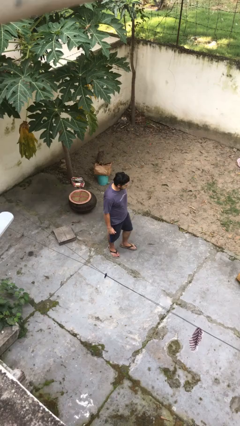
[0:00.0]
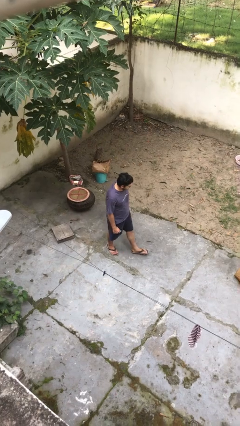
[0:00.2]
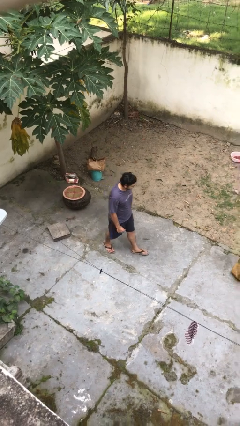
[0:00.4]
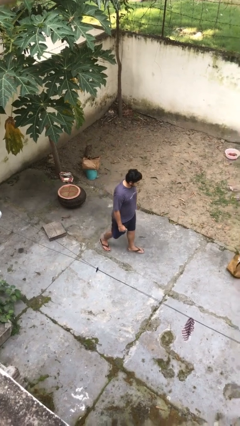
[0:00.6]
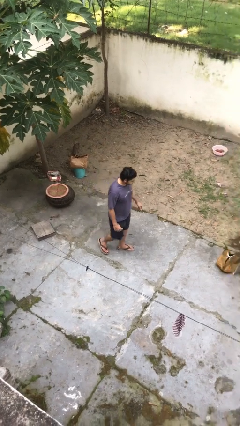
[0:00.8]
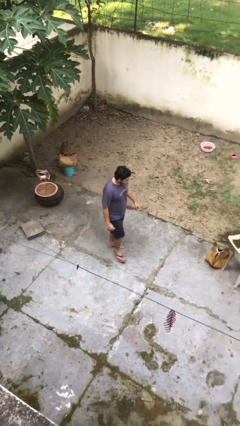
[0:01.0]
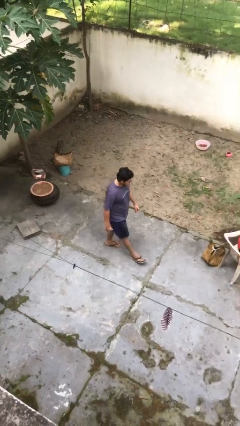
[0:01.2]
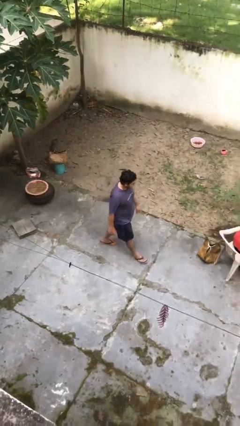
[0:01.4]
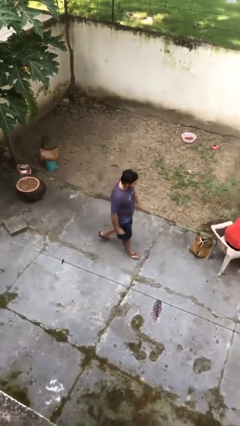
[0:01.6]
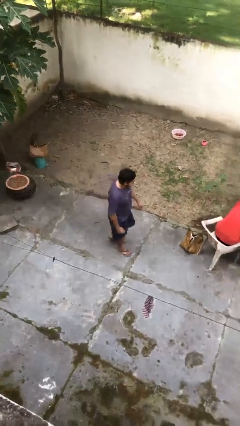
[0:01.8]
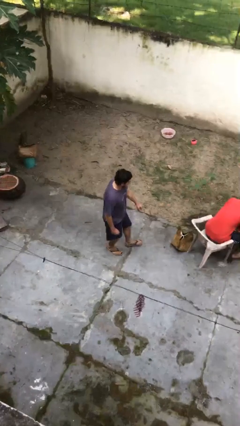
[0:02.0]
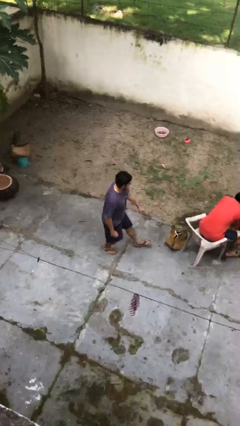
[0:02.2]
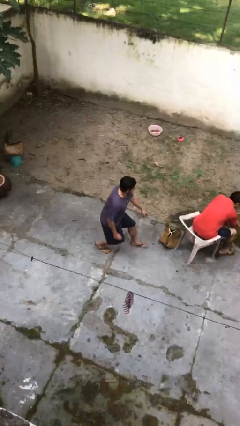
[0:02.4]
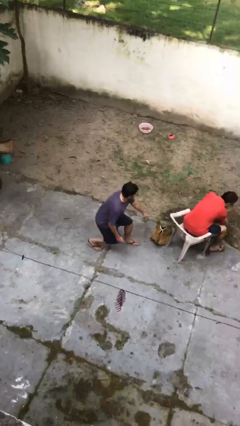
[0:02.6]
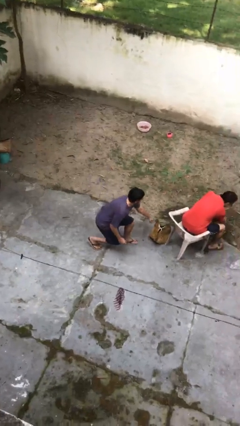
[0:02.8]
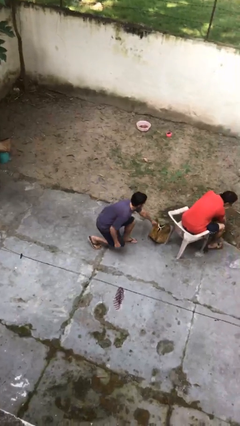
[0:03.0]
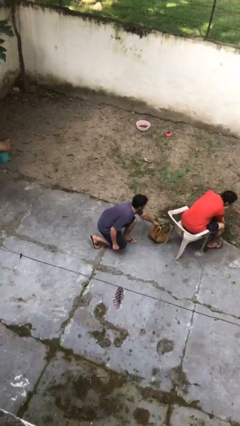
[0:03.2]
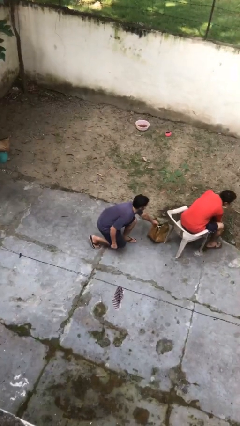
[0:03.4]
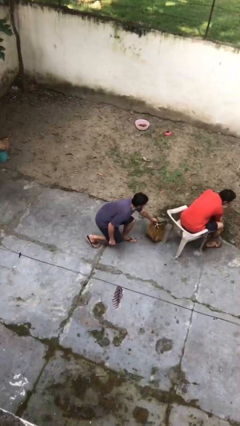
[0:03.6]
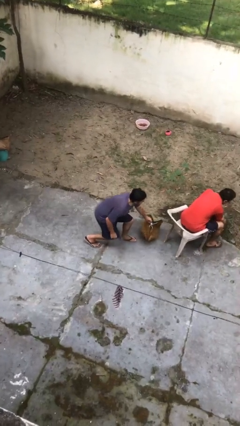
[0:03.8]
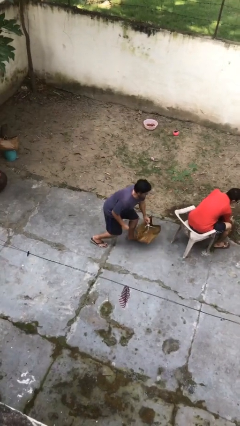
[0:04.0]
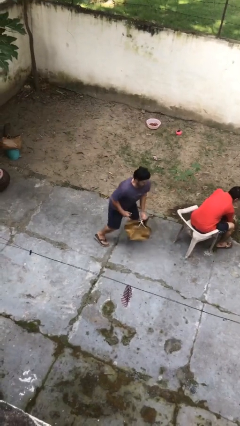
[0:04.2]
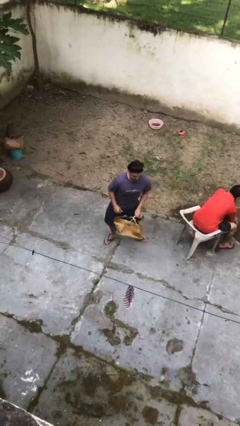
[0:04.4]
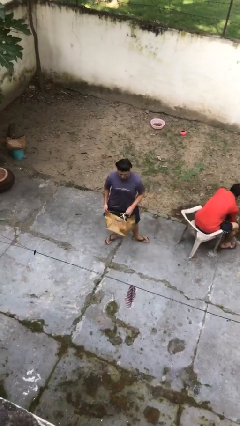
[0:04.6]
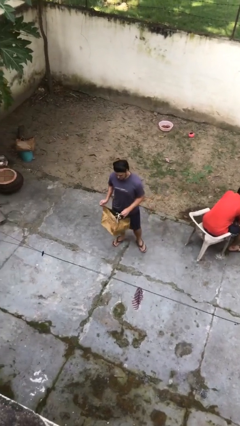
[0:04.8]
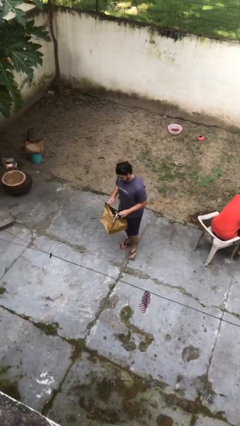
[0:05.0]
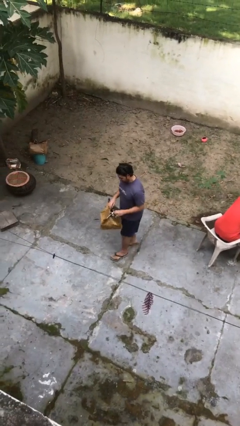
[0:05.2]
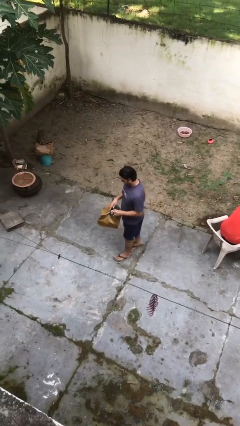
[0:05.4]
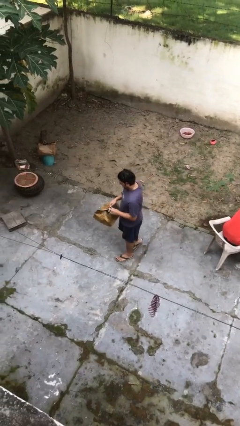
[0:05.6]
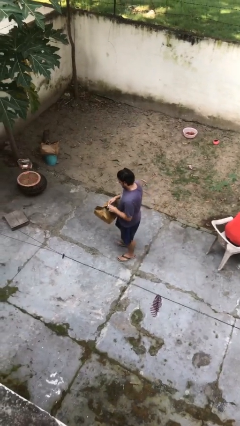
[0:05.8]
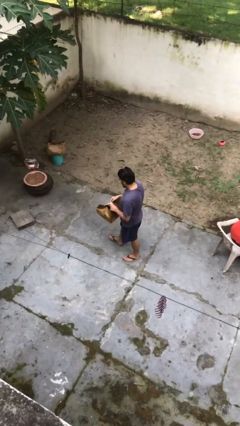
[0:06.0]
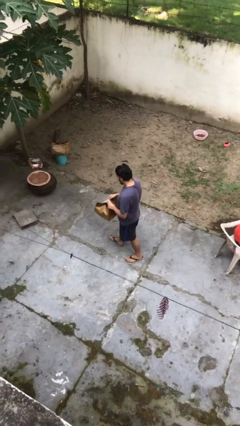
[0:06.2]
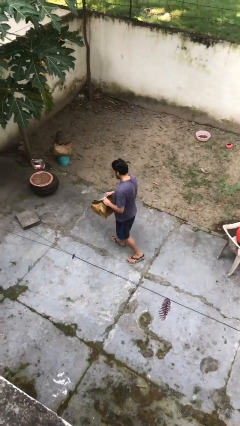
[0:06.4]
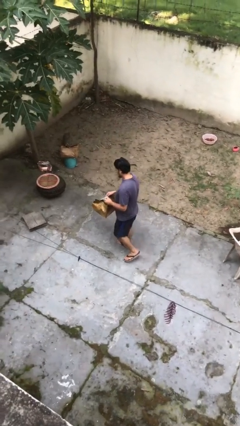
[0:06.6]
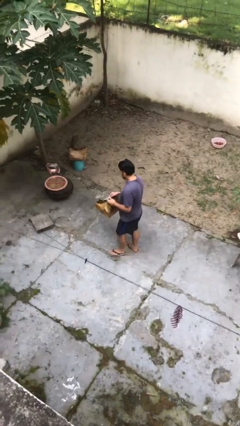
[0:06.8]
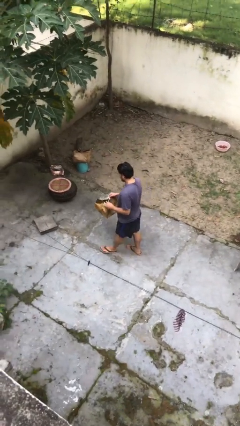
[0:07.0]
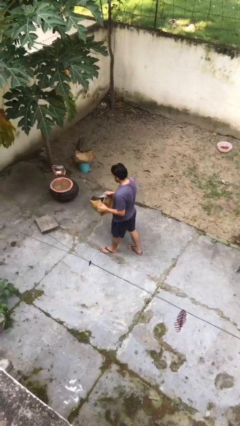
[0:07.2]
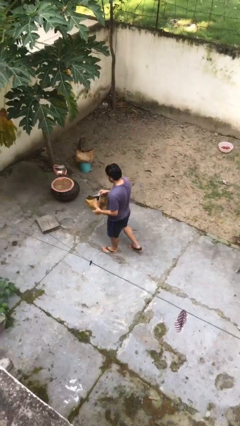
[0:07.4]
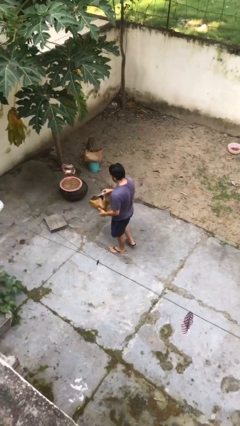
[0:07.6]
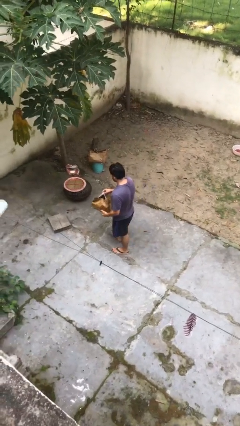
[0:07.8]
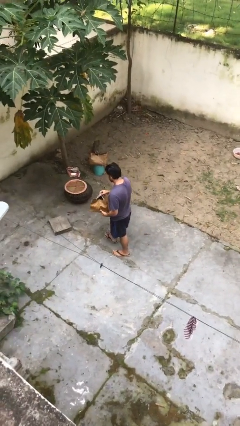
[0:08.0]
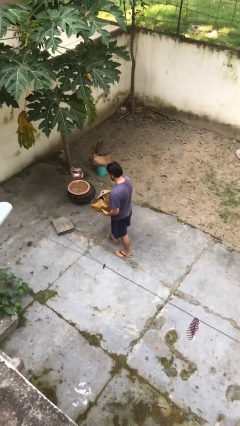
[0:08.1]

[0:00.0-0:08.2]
person steals object from person

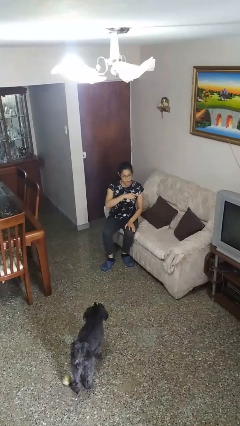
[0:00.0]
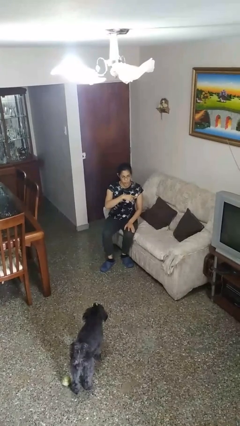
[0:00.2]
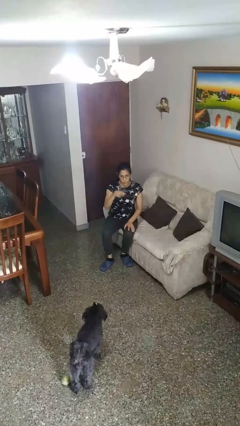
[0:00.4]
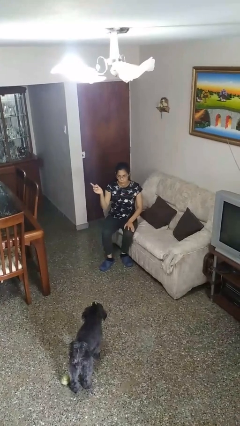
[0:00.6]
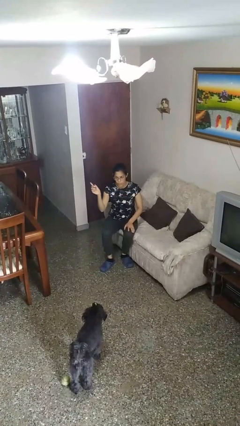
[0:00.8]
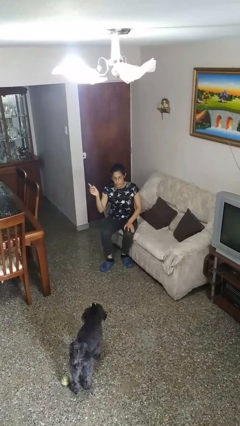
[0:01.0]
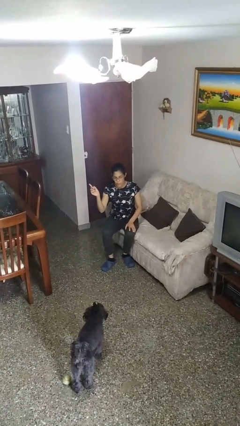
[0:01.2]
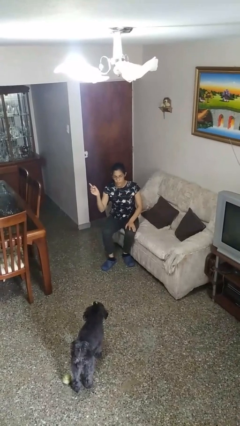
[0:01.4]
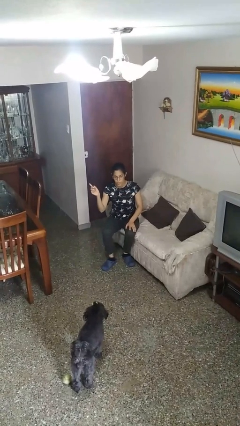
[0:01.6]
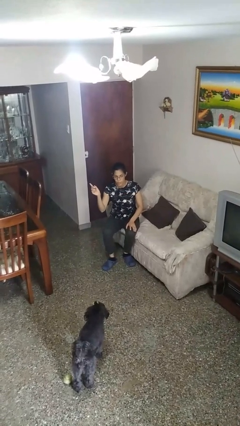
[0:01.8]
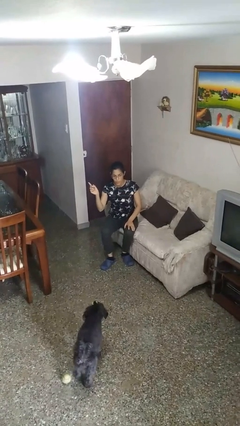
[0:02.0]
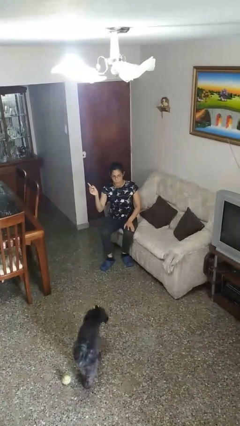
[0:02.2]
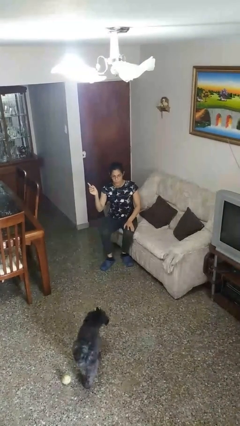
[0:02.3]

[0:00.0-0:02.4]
person gestures swipe right

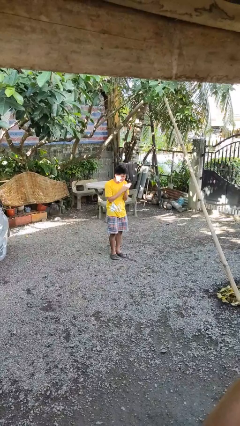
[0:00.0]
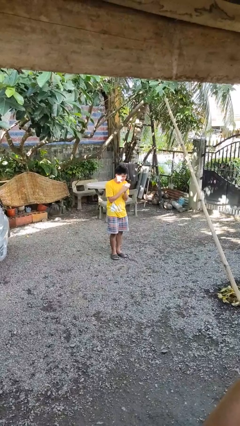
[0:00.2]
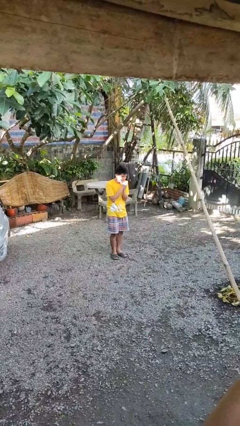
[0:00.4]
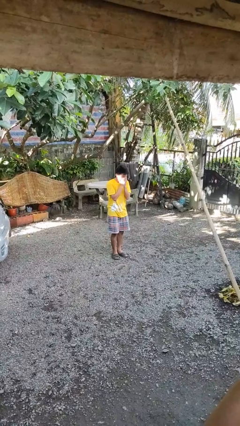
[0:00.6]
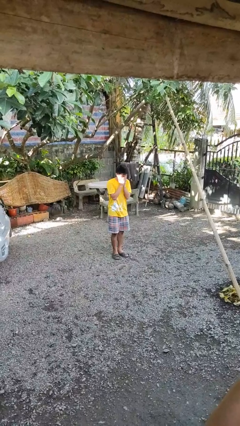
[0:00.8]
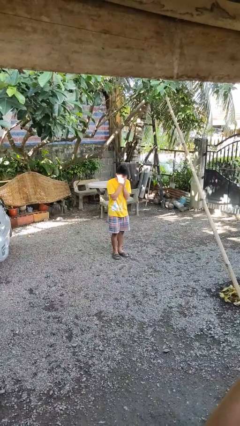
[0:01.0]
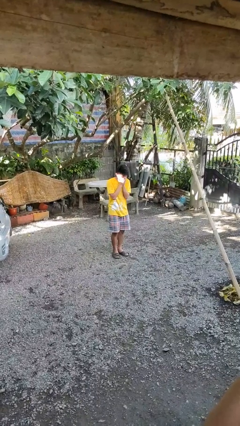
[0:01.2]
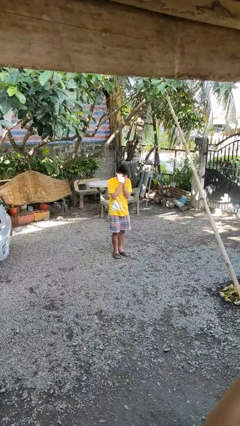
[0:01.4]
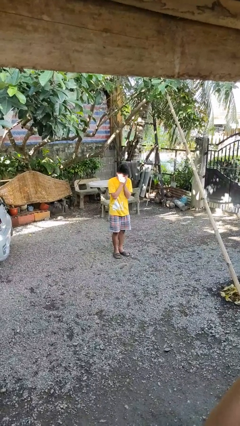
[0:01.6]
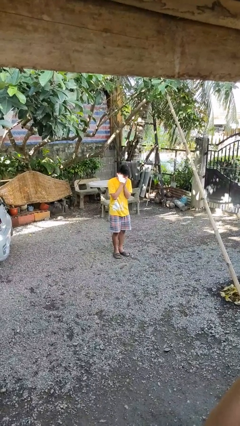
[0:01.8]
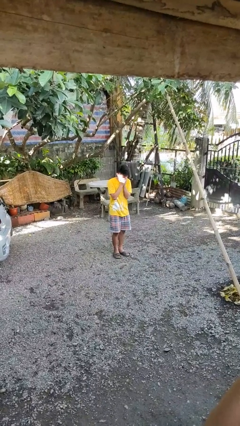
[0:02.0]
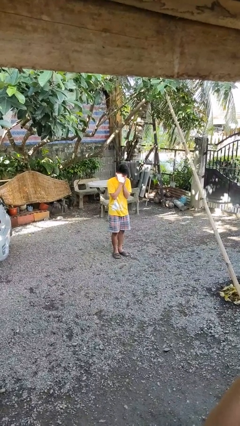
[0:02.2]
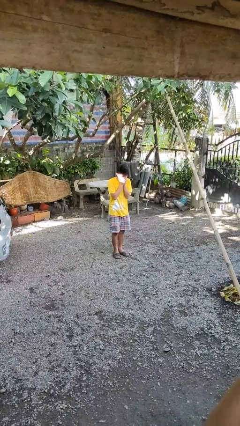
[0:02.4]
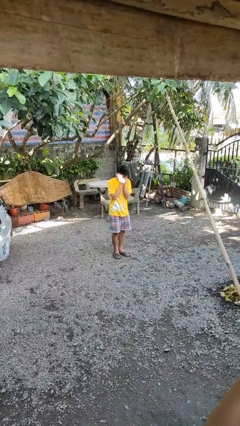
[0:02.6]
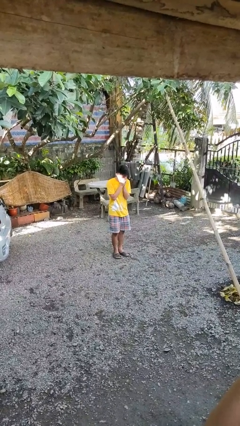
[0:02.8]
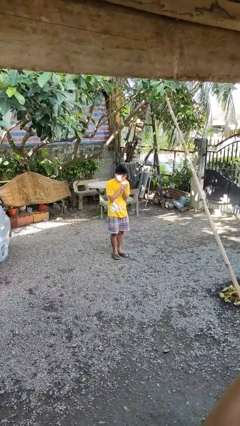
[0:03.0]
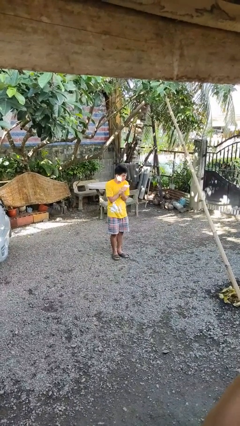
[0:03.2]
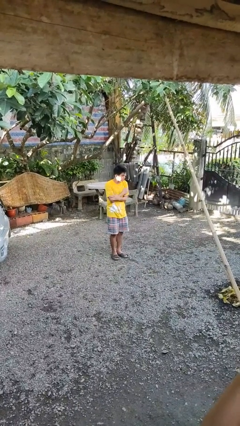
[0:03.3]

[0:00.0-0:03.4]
person blows into hands

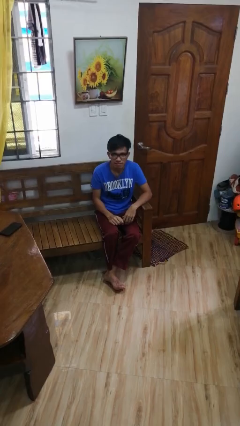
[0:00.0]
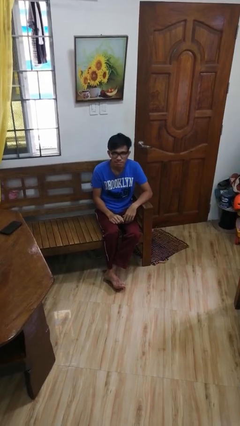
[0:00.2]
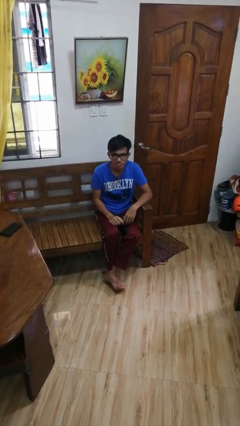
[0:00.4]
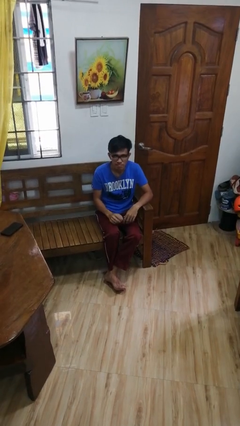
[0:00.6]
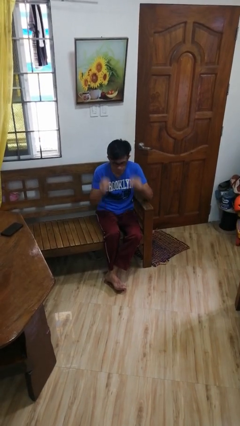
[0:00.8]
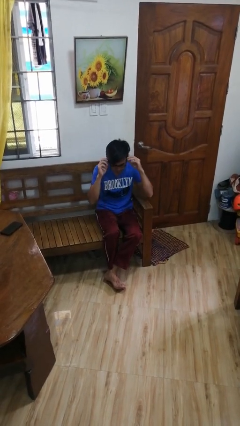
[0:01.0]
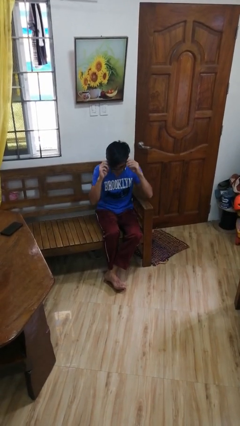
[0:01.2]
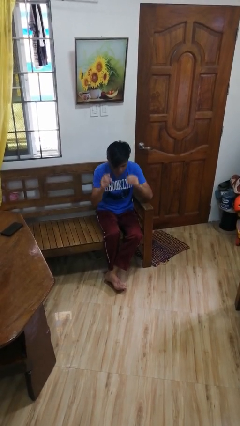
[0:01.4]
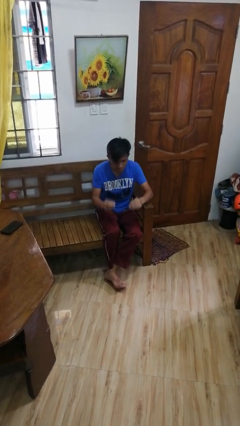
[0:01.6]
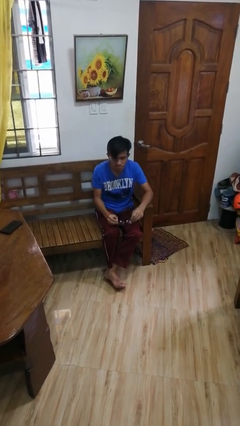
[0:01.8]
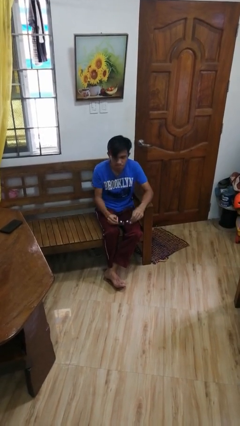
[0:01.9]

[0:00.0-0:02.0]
person takes off glasses

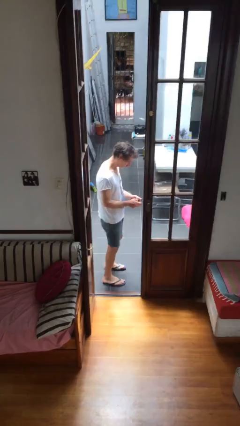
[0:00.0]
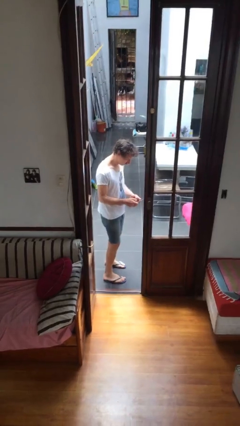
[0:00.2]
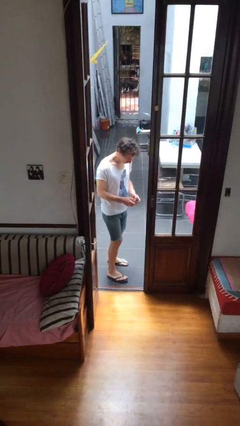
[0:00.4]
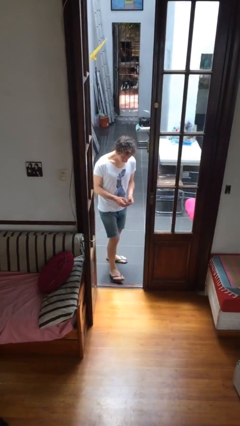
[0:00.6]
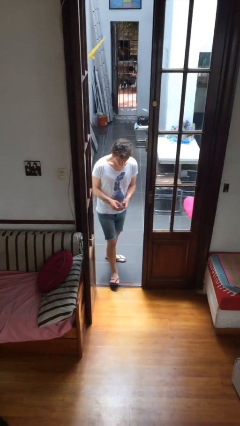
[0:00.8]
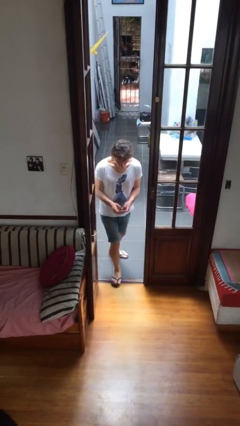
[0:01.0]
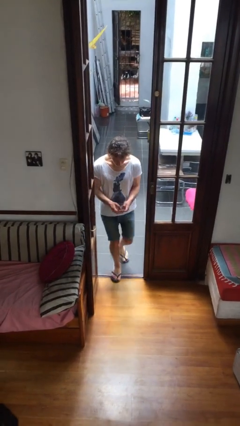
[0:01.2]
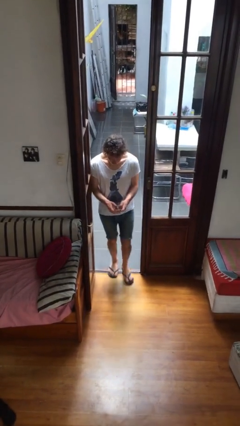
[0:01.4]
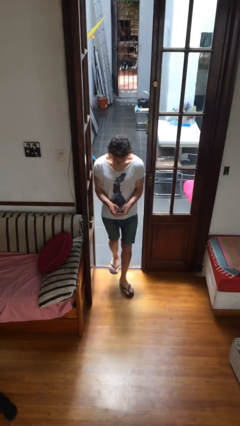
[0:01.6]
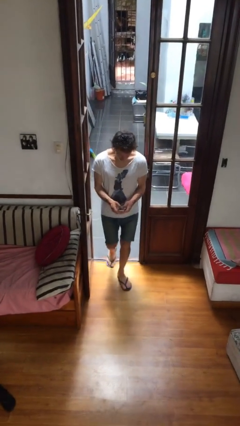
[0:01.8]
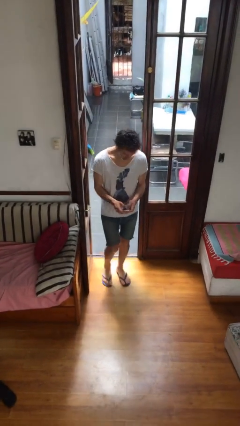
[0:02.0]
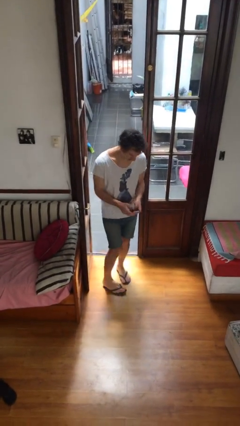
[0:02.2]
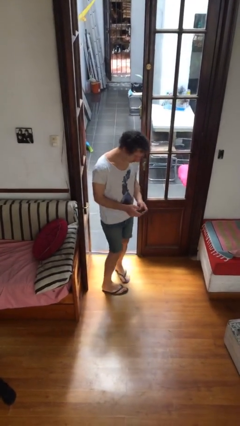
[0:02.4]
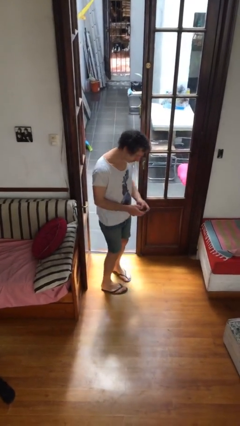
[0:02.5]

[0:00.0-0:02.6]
person enters scene through structure
